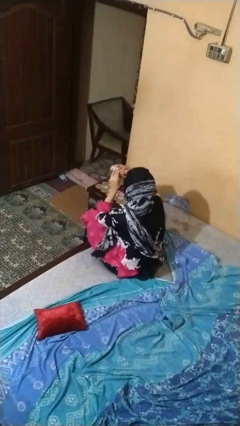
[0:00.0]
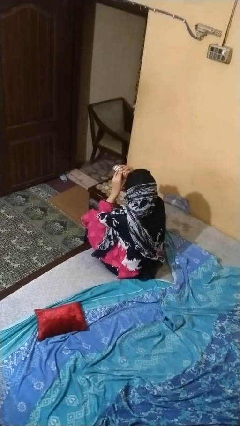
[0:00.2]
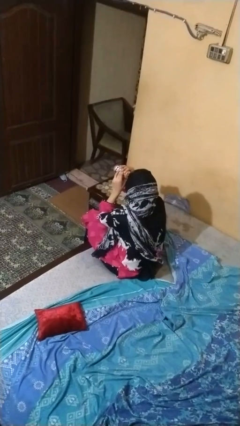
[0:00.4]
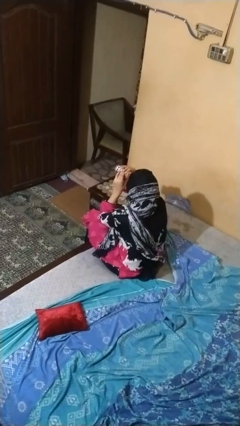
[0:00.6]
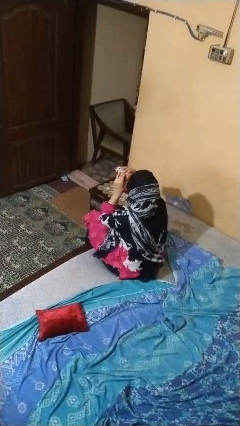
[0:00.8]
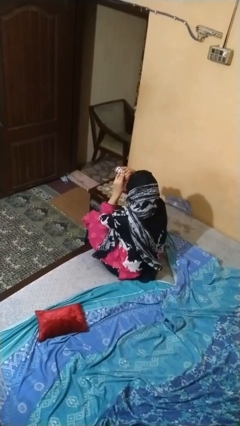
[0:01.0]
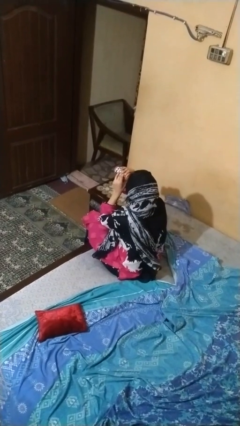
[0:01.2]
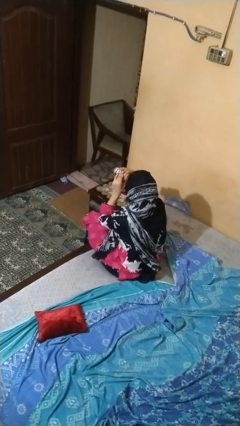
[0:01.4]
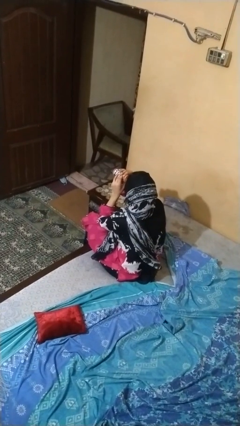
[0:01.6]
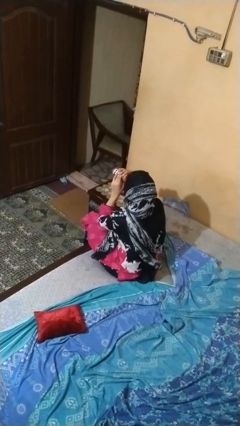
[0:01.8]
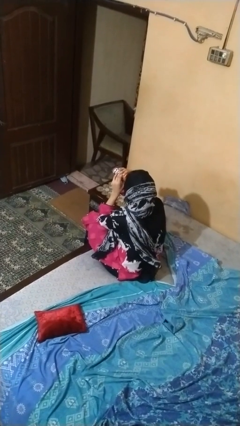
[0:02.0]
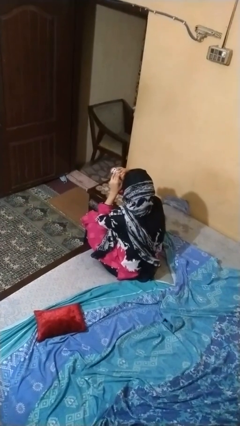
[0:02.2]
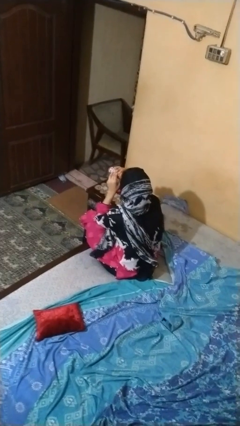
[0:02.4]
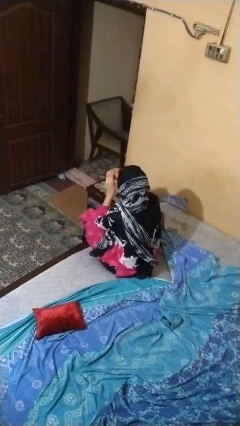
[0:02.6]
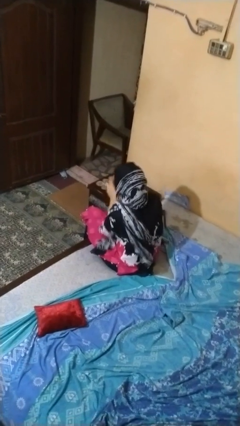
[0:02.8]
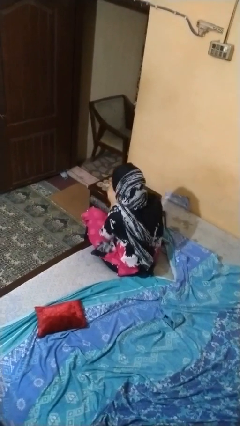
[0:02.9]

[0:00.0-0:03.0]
person drinks from beverage can

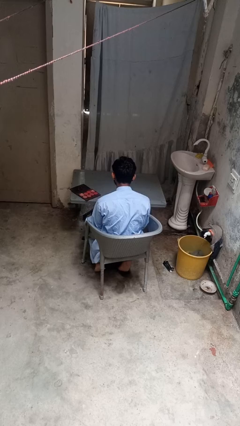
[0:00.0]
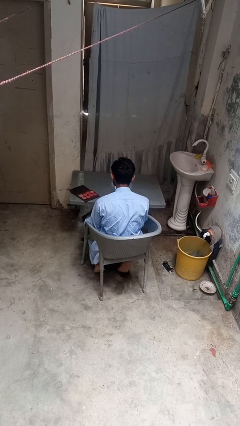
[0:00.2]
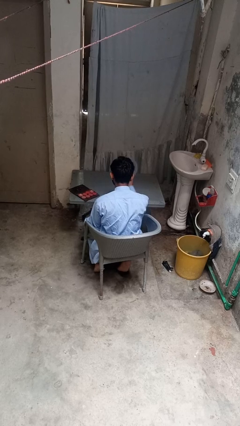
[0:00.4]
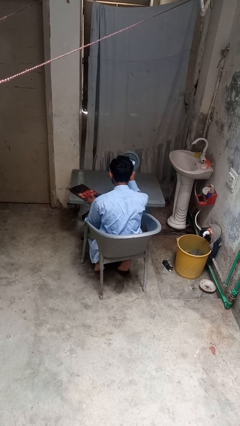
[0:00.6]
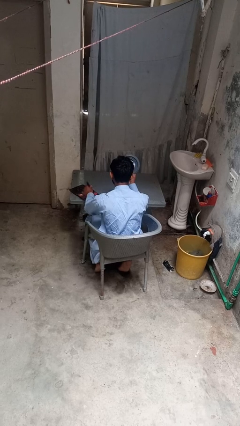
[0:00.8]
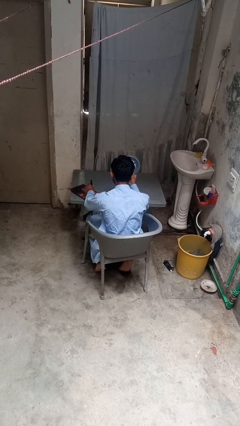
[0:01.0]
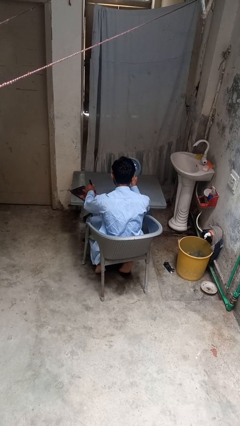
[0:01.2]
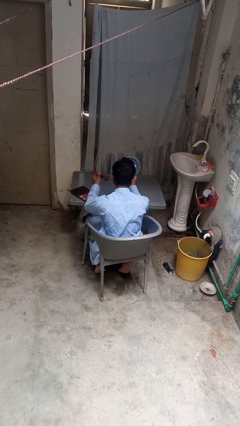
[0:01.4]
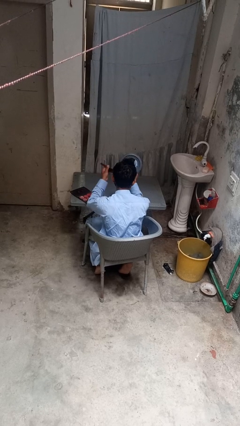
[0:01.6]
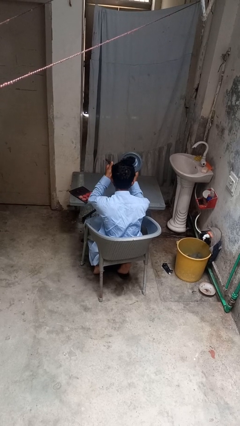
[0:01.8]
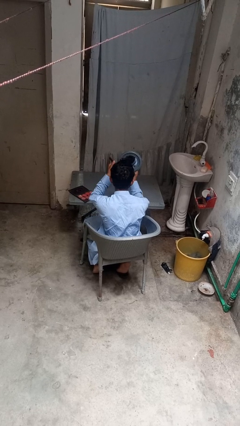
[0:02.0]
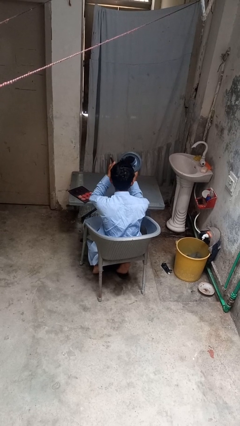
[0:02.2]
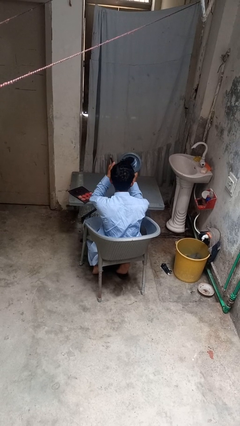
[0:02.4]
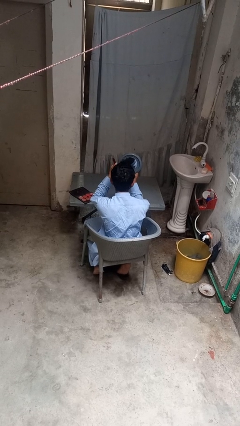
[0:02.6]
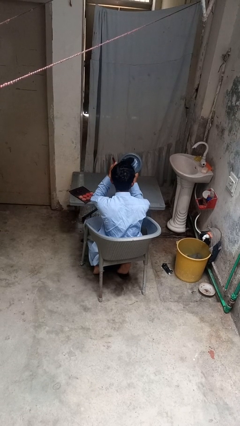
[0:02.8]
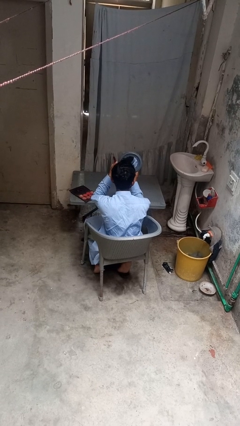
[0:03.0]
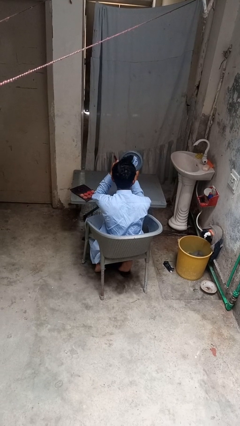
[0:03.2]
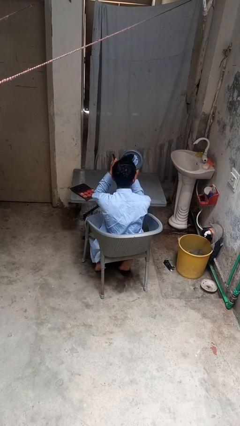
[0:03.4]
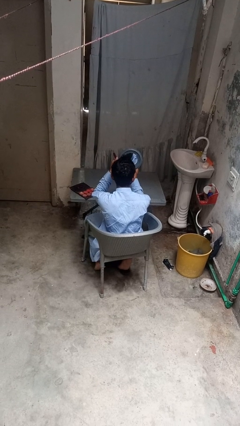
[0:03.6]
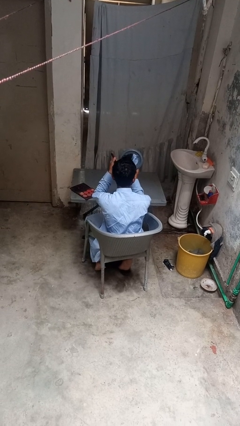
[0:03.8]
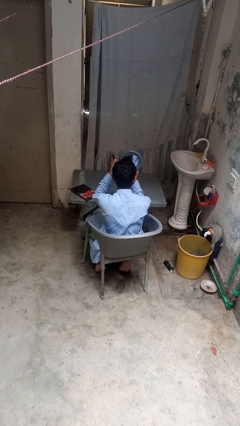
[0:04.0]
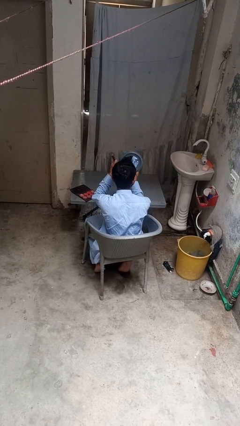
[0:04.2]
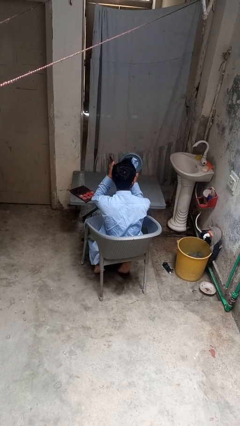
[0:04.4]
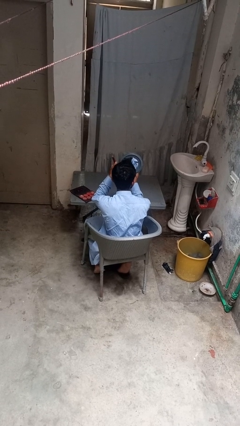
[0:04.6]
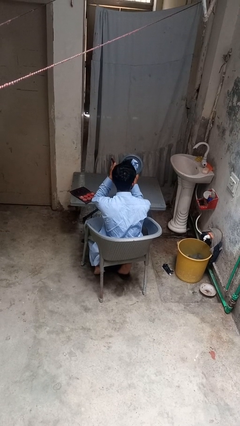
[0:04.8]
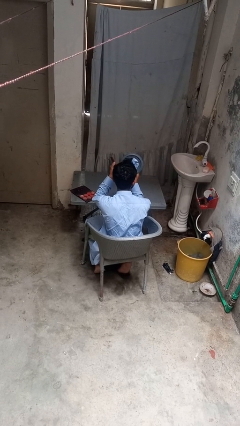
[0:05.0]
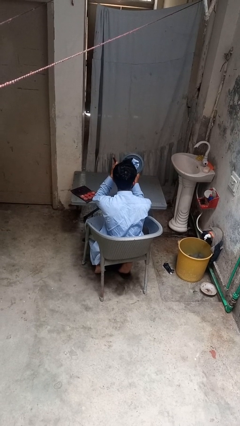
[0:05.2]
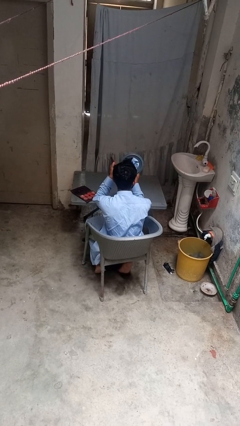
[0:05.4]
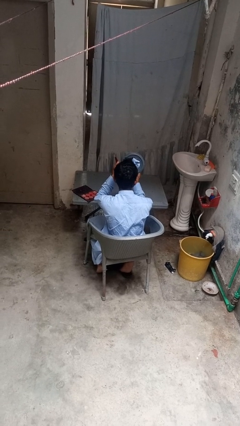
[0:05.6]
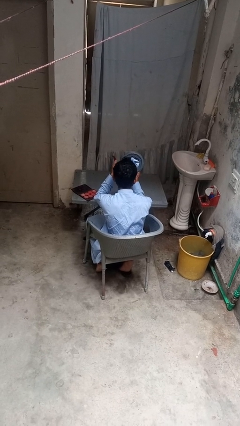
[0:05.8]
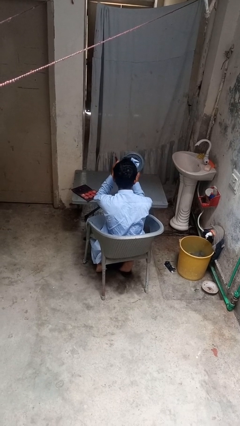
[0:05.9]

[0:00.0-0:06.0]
person applies eye makeup

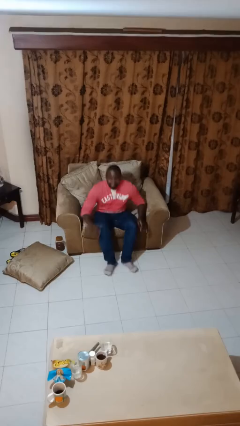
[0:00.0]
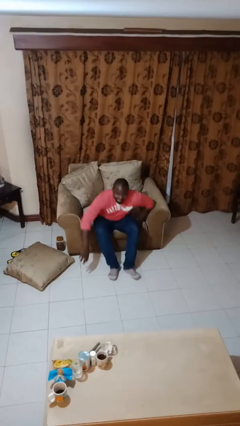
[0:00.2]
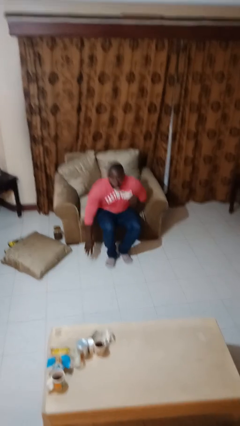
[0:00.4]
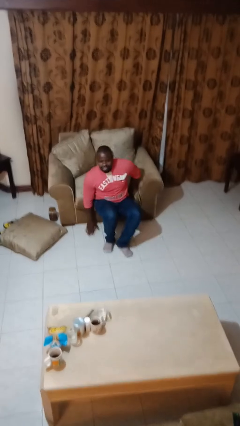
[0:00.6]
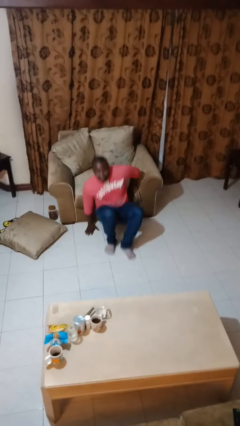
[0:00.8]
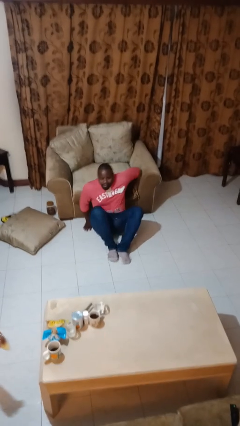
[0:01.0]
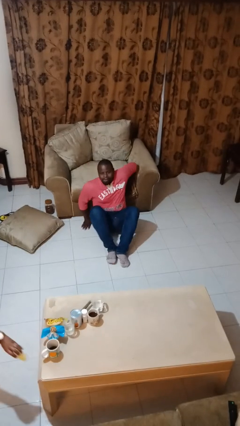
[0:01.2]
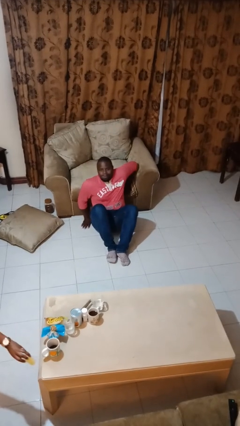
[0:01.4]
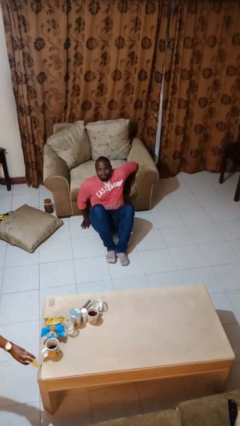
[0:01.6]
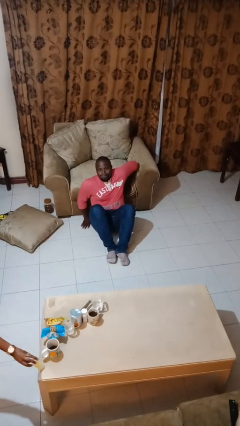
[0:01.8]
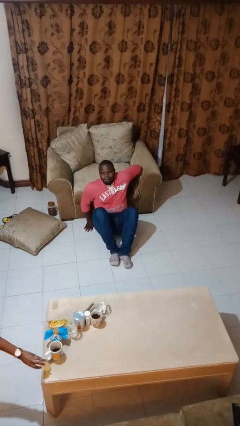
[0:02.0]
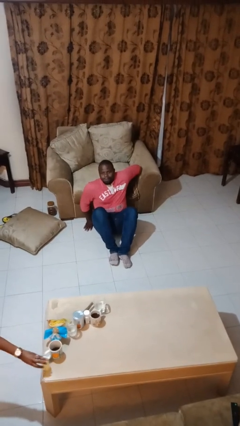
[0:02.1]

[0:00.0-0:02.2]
person falls from chair

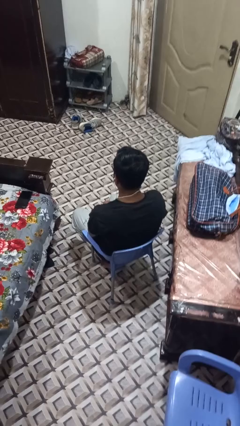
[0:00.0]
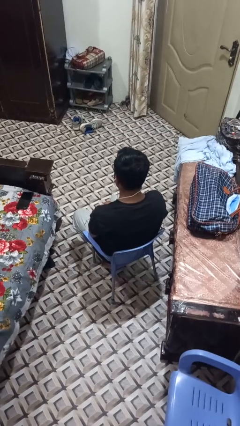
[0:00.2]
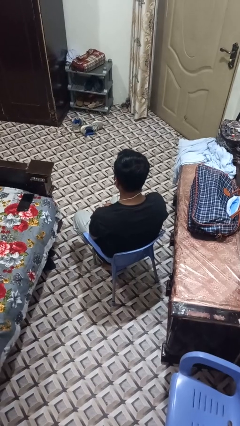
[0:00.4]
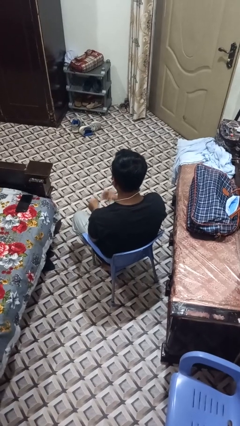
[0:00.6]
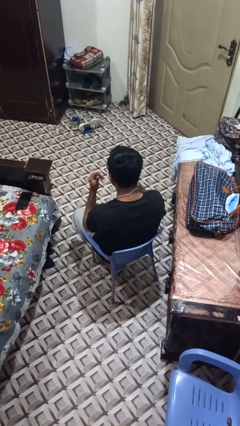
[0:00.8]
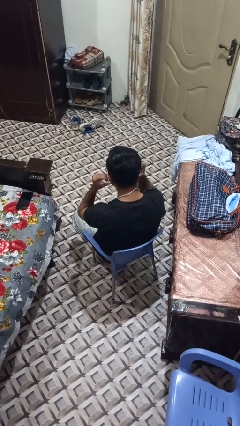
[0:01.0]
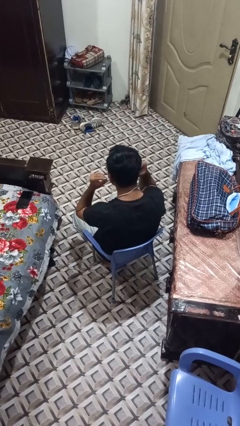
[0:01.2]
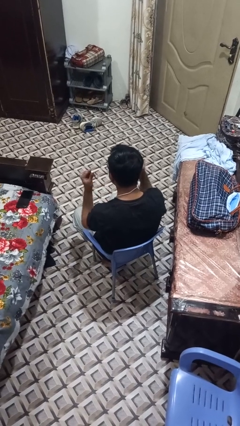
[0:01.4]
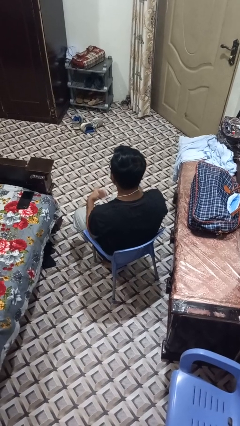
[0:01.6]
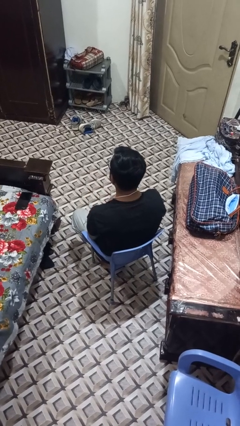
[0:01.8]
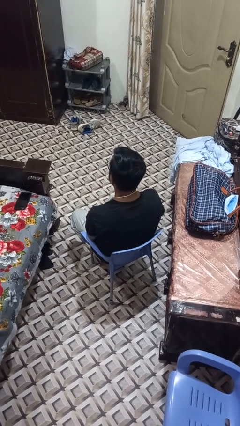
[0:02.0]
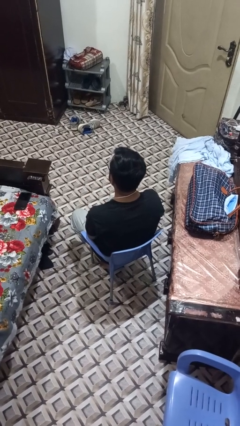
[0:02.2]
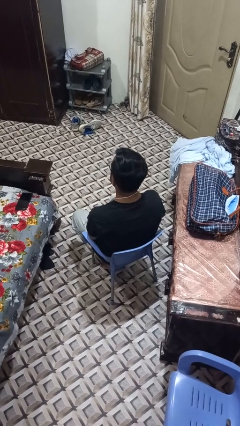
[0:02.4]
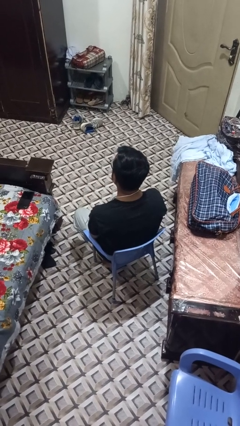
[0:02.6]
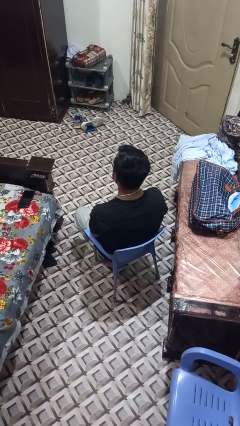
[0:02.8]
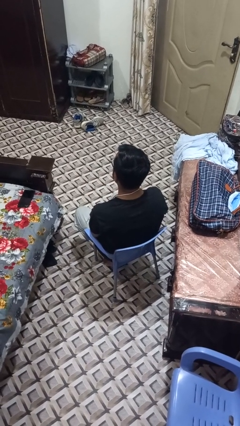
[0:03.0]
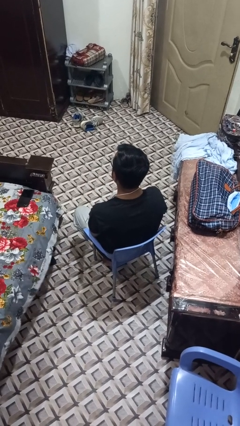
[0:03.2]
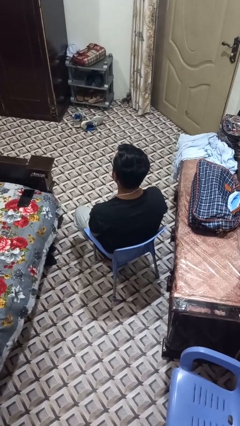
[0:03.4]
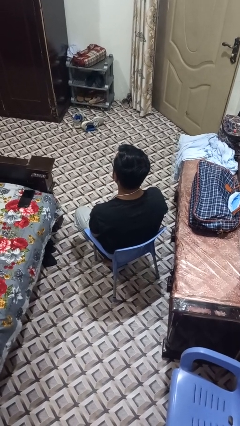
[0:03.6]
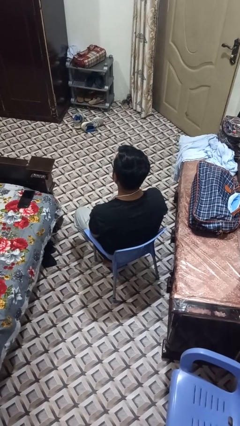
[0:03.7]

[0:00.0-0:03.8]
person takes off headphones

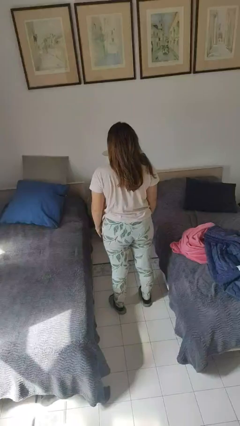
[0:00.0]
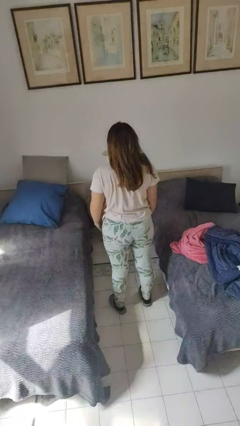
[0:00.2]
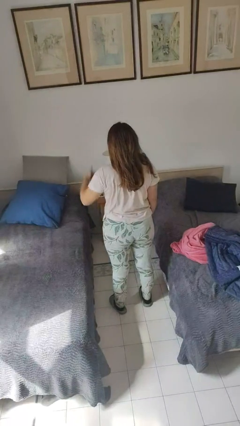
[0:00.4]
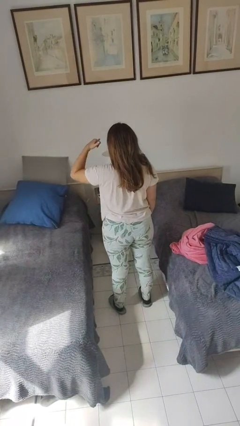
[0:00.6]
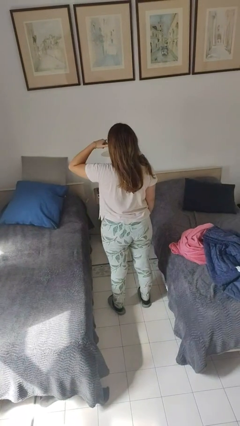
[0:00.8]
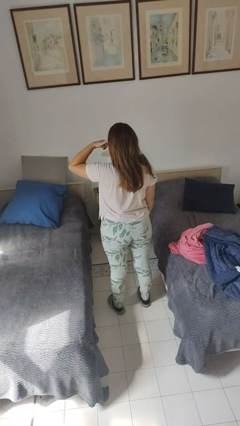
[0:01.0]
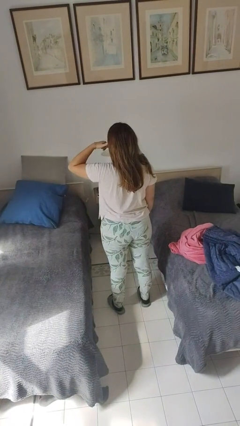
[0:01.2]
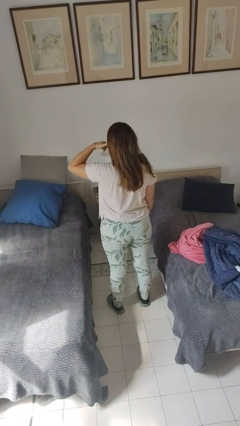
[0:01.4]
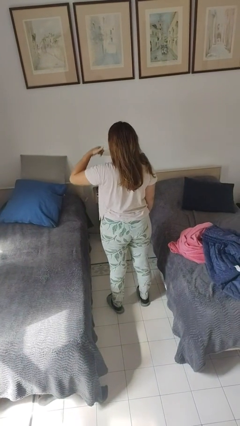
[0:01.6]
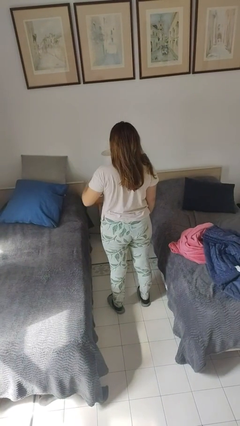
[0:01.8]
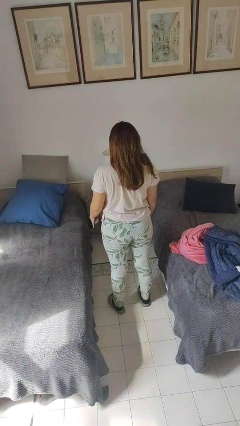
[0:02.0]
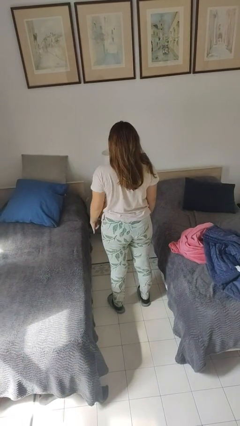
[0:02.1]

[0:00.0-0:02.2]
person gestures call me

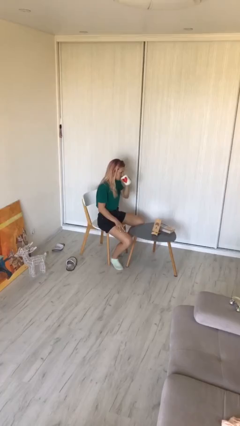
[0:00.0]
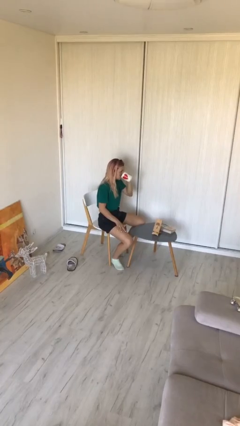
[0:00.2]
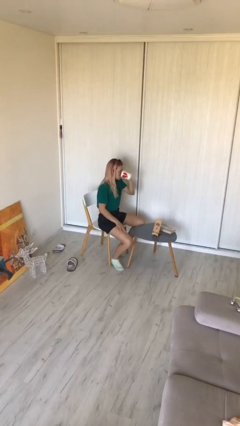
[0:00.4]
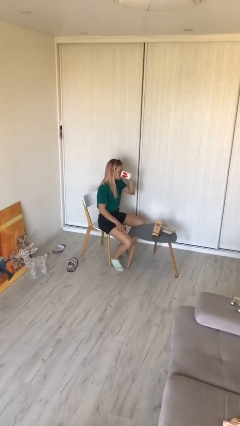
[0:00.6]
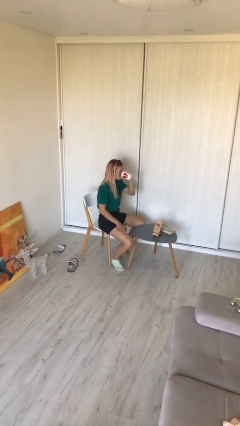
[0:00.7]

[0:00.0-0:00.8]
person drinks from mug
